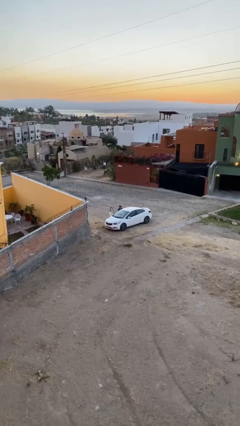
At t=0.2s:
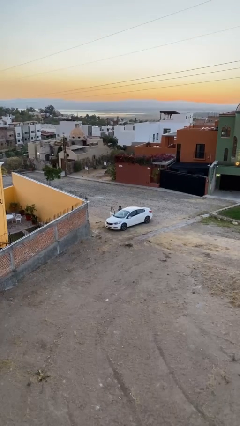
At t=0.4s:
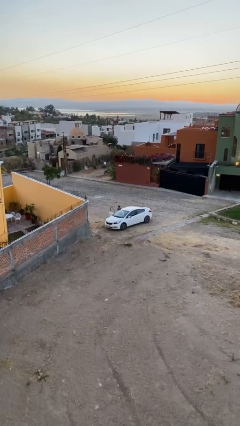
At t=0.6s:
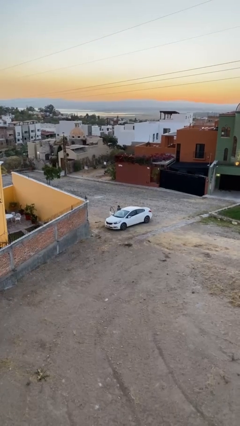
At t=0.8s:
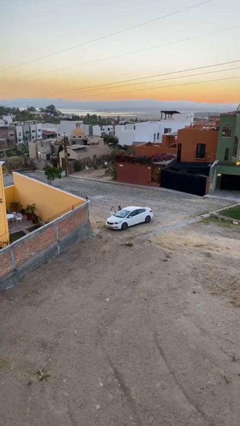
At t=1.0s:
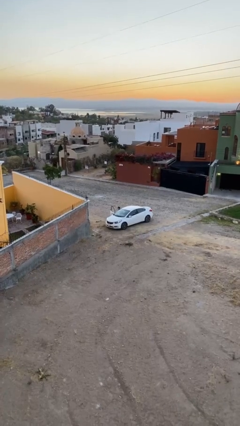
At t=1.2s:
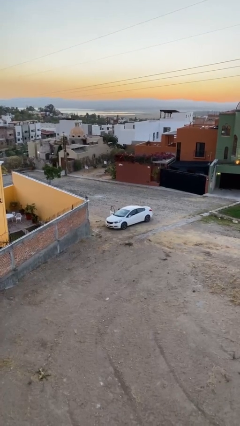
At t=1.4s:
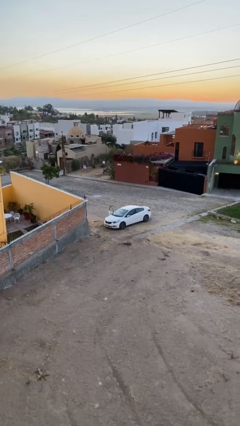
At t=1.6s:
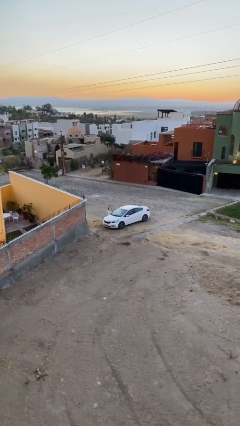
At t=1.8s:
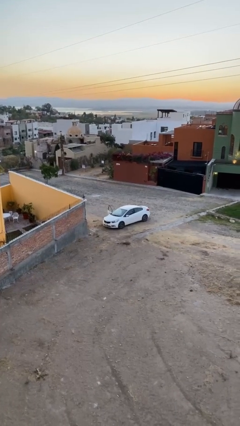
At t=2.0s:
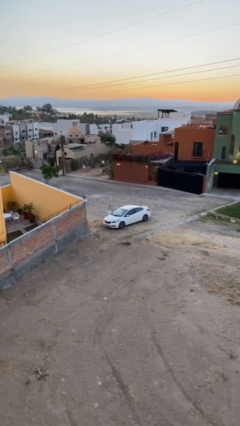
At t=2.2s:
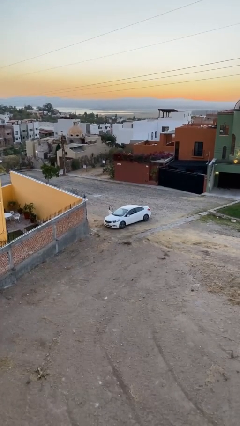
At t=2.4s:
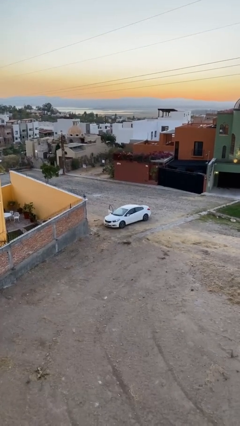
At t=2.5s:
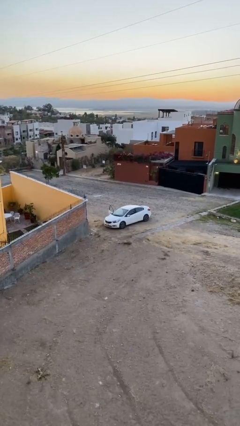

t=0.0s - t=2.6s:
person enters car

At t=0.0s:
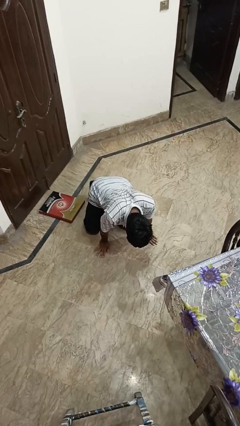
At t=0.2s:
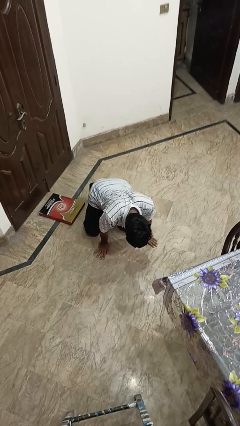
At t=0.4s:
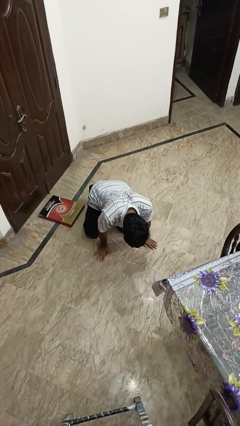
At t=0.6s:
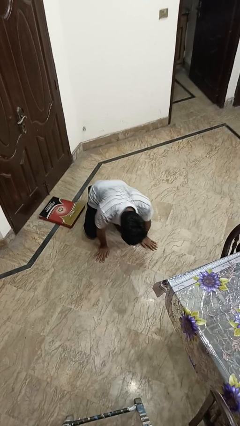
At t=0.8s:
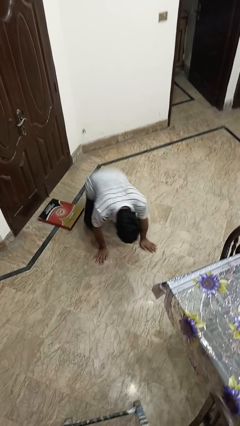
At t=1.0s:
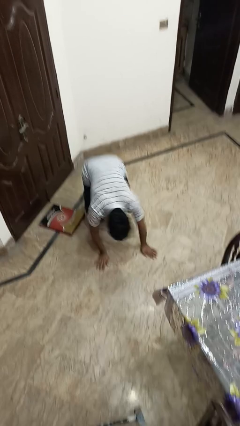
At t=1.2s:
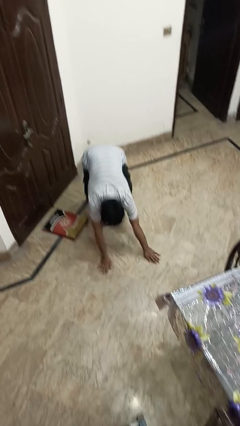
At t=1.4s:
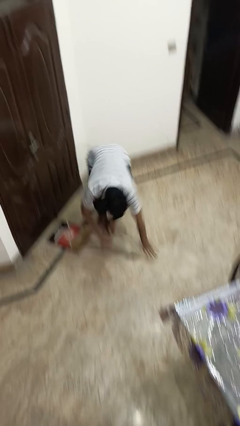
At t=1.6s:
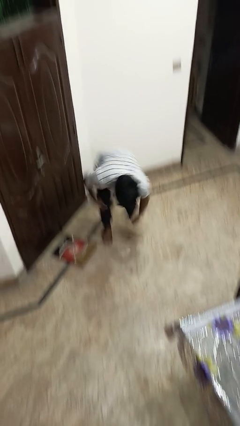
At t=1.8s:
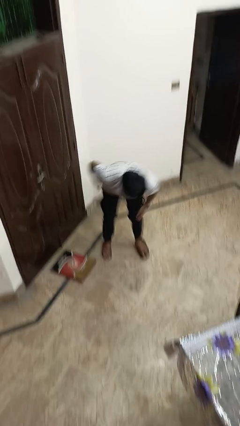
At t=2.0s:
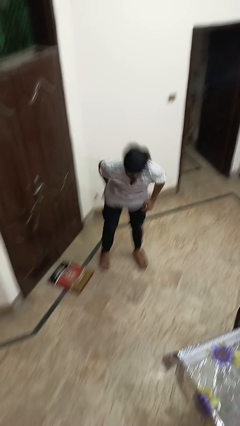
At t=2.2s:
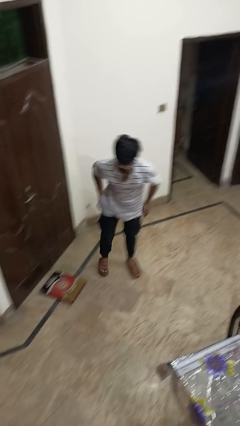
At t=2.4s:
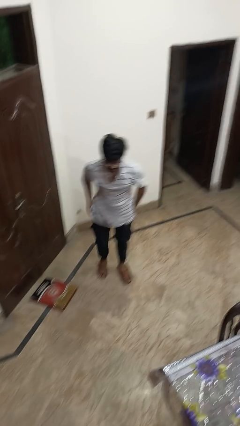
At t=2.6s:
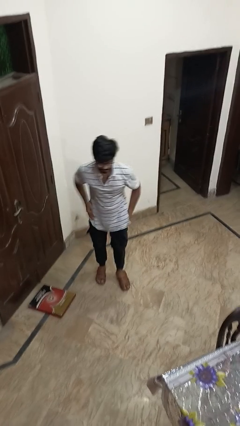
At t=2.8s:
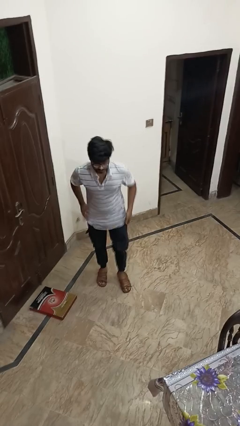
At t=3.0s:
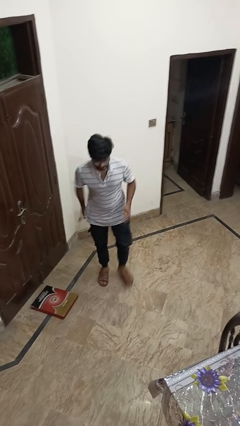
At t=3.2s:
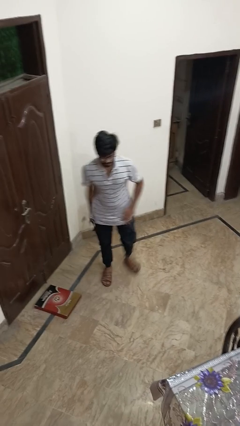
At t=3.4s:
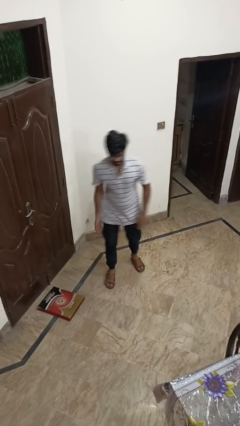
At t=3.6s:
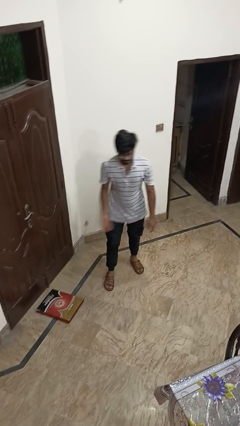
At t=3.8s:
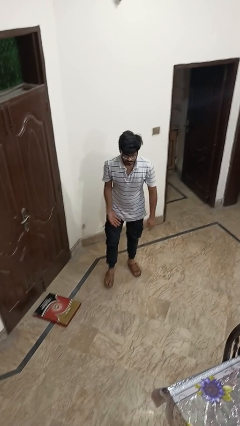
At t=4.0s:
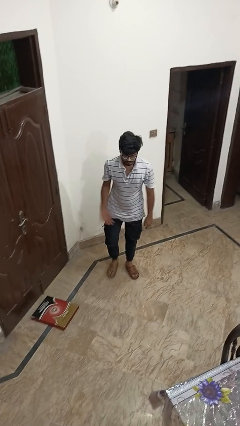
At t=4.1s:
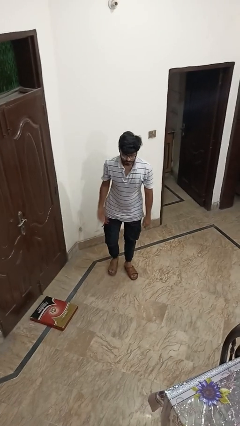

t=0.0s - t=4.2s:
person stands up from floor

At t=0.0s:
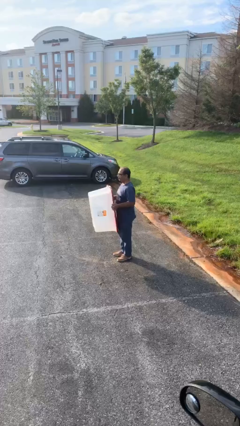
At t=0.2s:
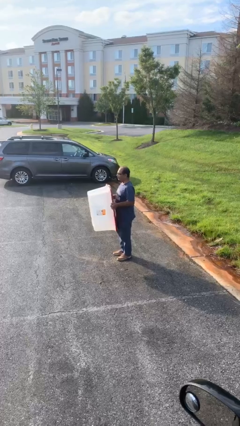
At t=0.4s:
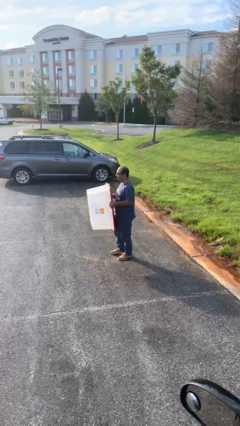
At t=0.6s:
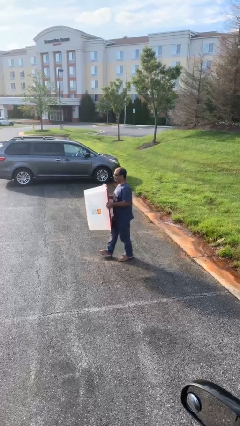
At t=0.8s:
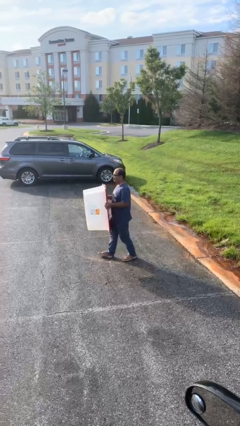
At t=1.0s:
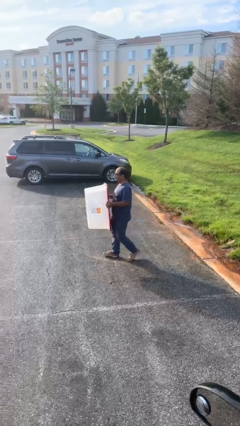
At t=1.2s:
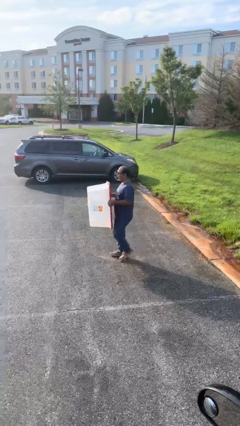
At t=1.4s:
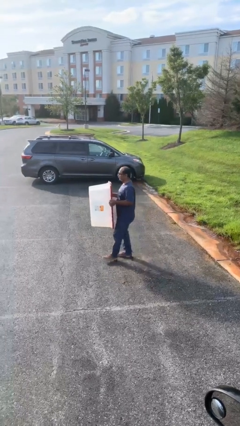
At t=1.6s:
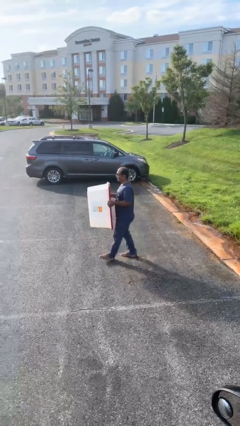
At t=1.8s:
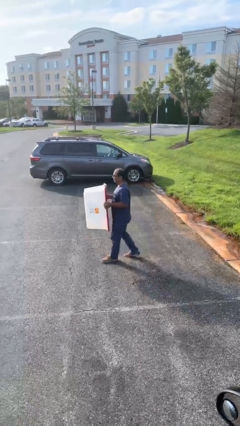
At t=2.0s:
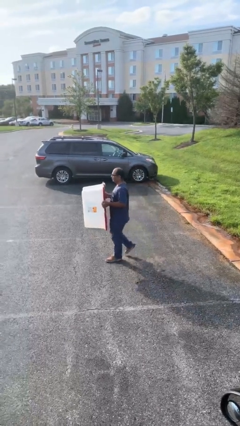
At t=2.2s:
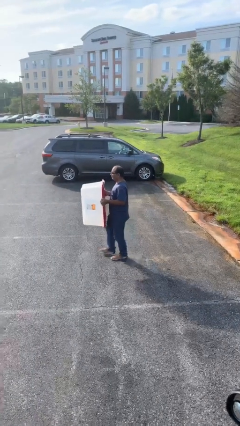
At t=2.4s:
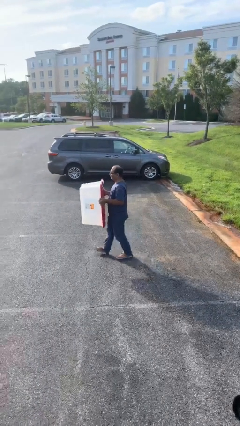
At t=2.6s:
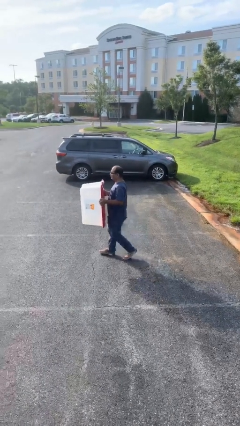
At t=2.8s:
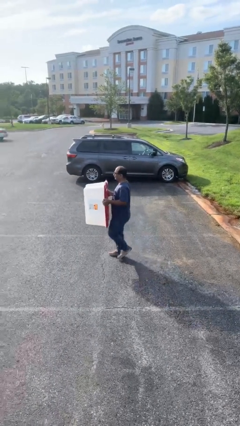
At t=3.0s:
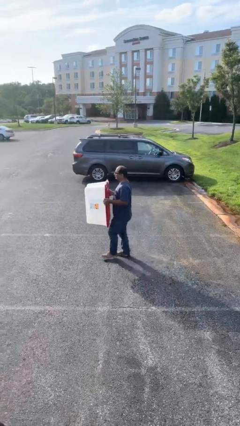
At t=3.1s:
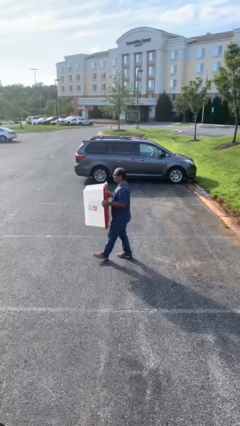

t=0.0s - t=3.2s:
person carries heavy object

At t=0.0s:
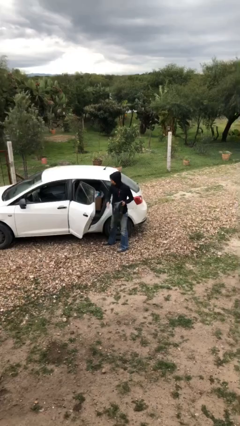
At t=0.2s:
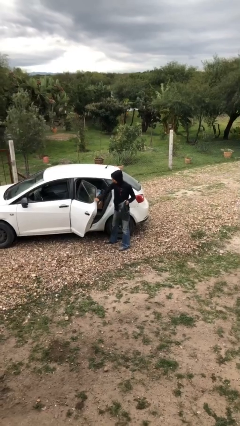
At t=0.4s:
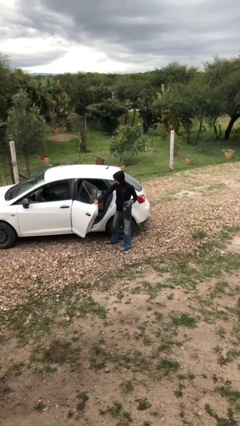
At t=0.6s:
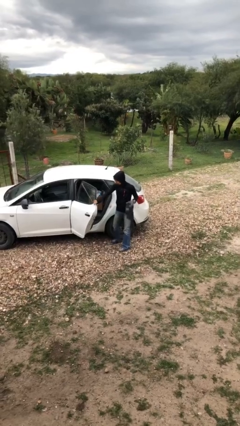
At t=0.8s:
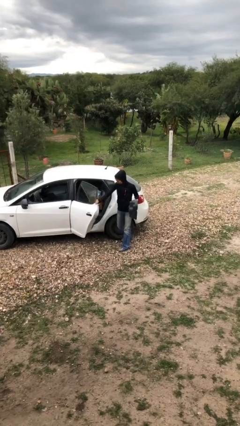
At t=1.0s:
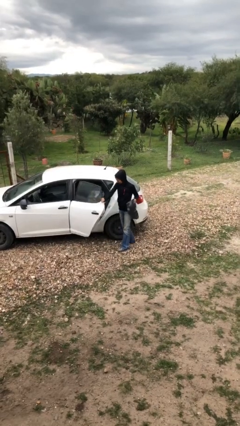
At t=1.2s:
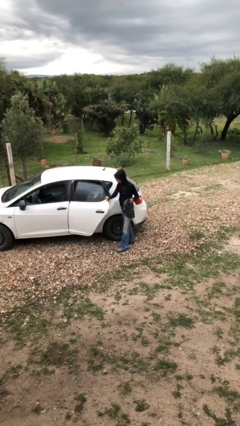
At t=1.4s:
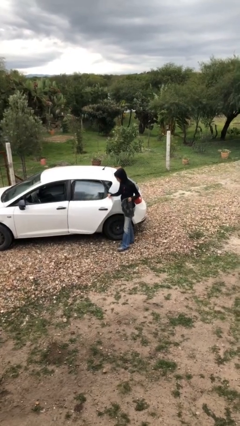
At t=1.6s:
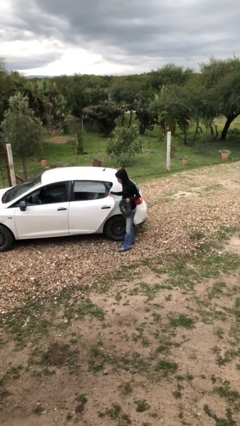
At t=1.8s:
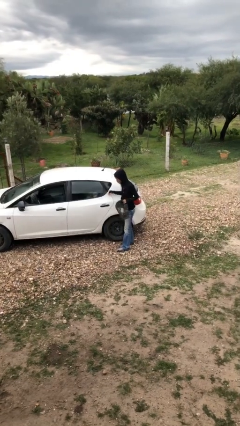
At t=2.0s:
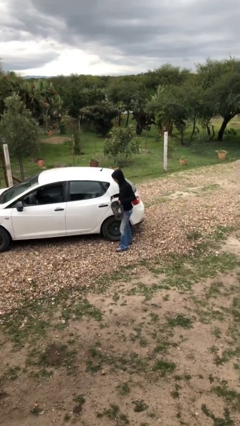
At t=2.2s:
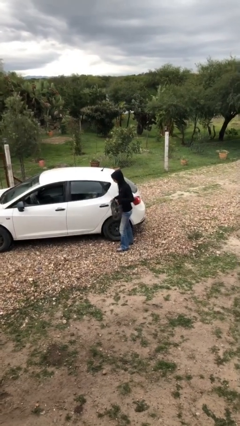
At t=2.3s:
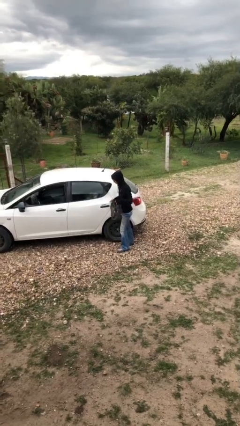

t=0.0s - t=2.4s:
person closes car door

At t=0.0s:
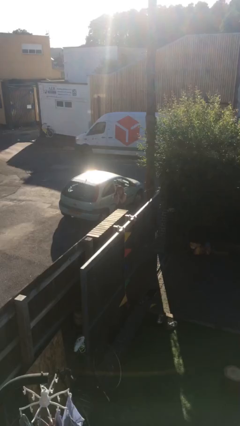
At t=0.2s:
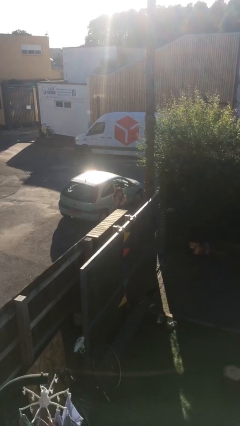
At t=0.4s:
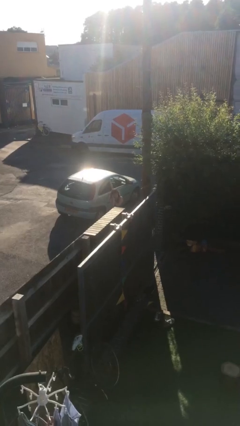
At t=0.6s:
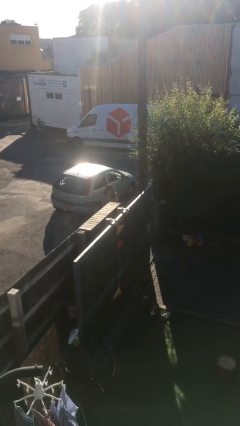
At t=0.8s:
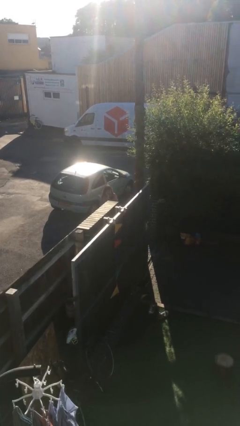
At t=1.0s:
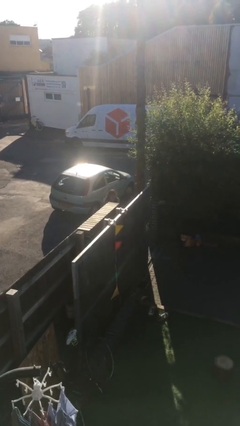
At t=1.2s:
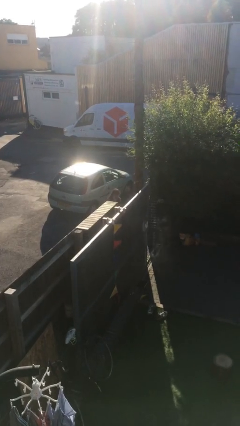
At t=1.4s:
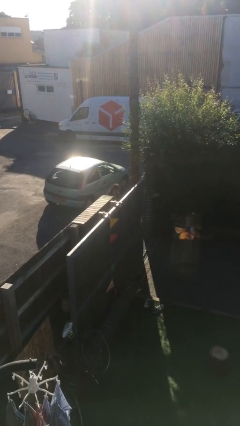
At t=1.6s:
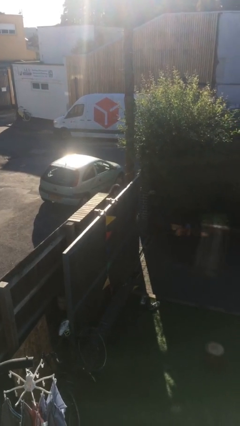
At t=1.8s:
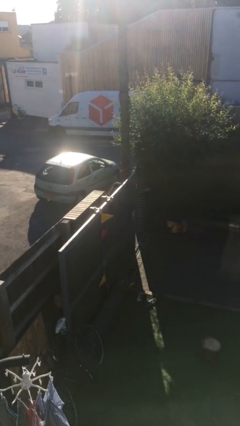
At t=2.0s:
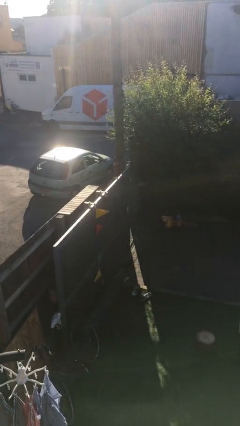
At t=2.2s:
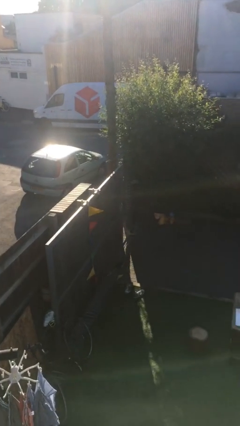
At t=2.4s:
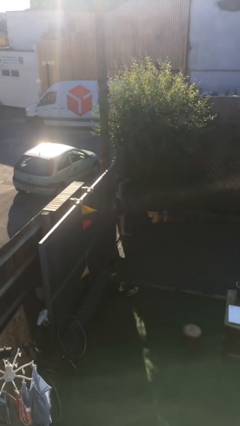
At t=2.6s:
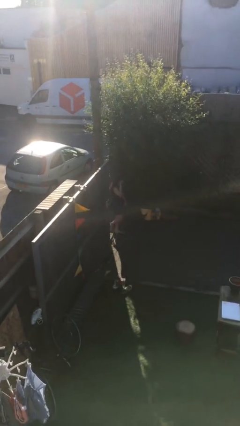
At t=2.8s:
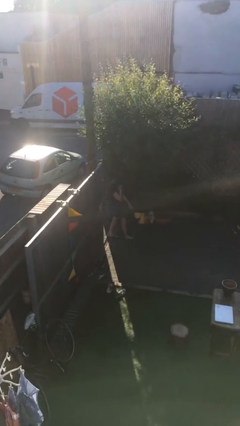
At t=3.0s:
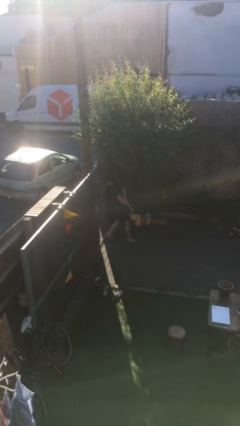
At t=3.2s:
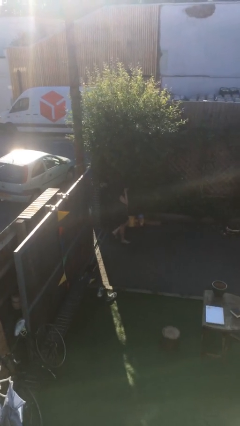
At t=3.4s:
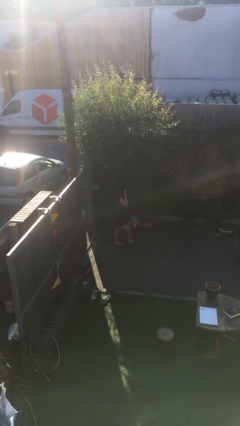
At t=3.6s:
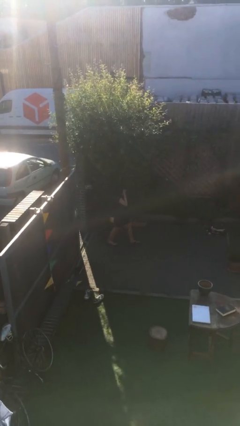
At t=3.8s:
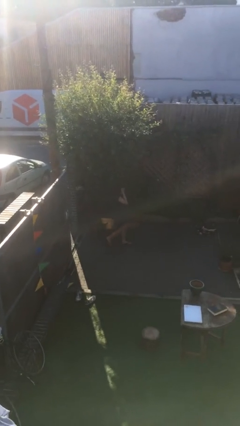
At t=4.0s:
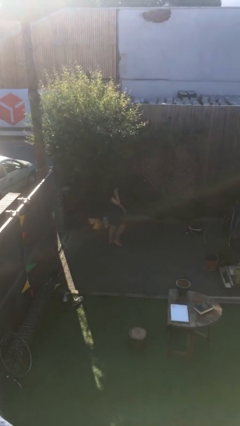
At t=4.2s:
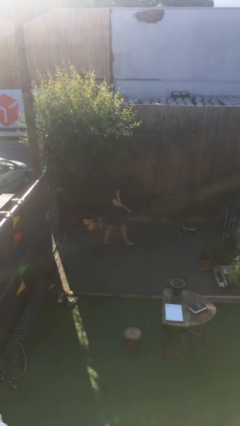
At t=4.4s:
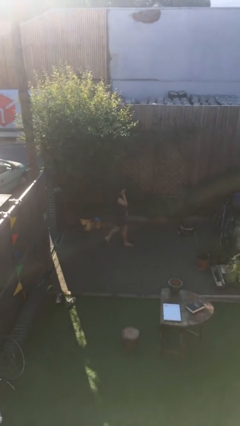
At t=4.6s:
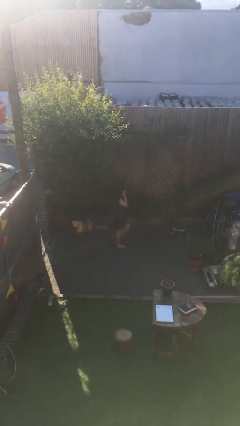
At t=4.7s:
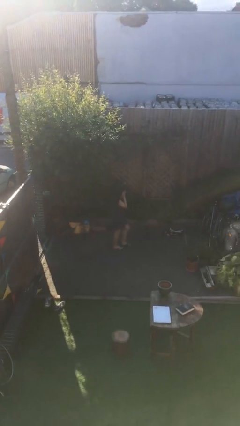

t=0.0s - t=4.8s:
person enters scene through structure

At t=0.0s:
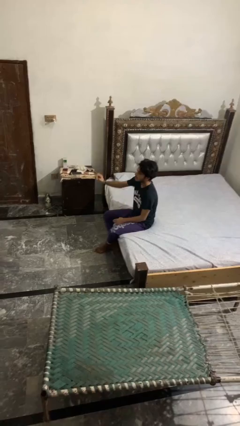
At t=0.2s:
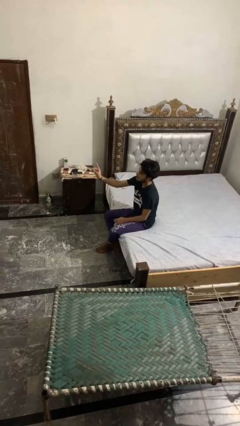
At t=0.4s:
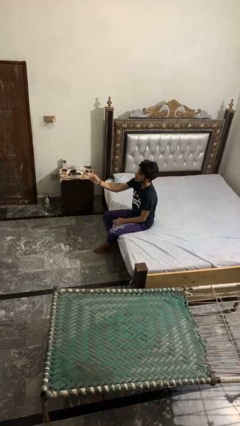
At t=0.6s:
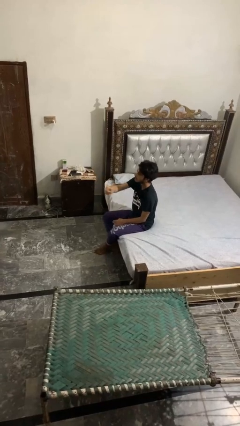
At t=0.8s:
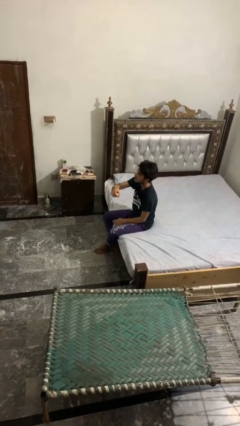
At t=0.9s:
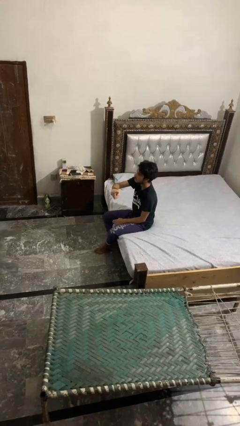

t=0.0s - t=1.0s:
person gestures swipe left
